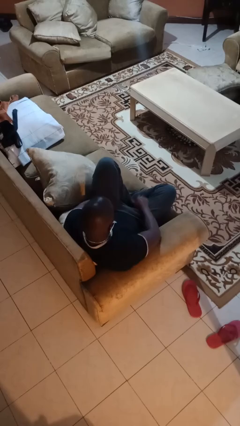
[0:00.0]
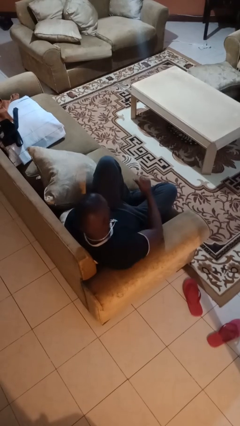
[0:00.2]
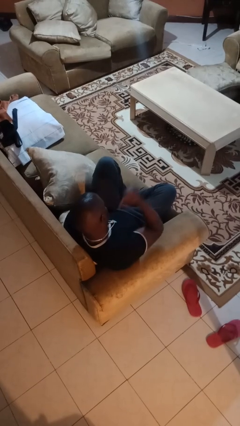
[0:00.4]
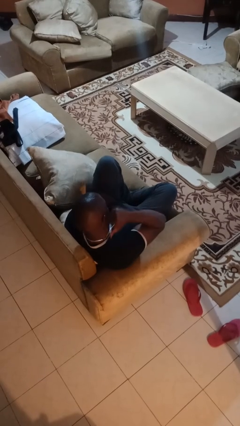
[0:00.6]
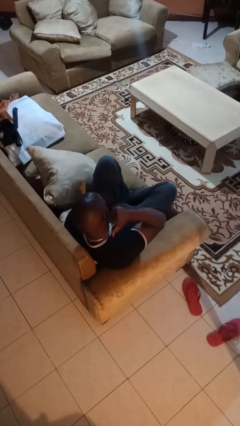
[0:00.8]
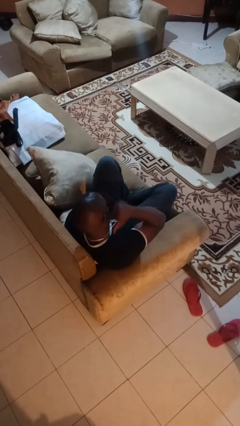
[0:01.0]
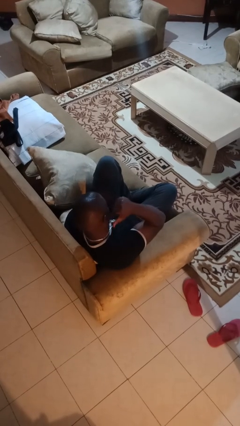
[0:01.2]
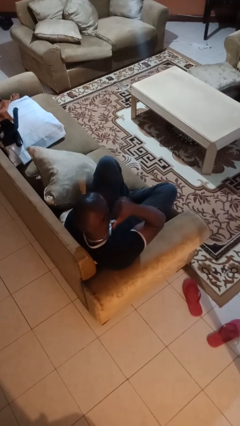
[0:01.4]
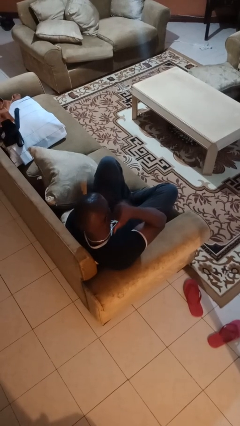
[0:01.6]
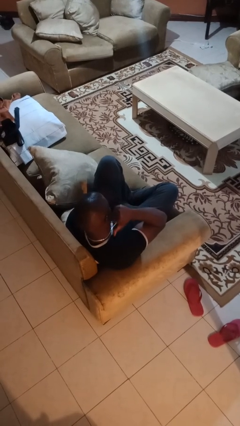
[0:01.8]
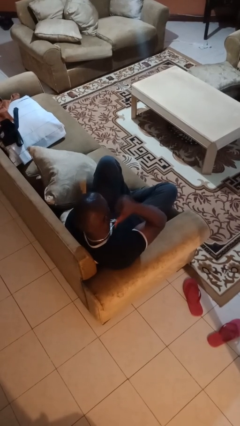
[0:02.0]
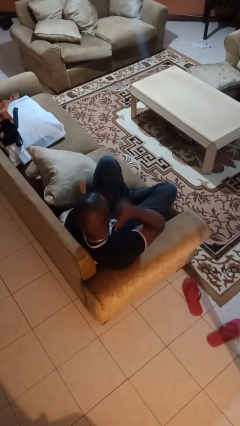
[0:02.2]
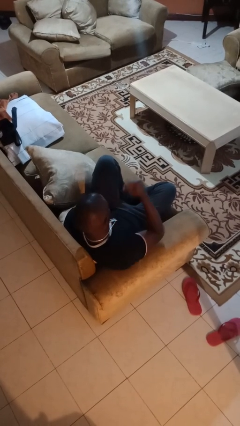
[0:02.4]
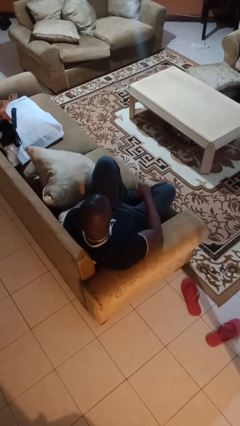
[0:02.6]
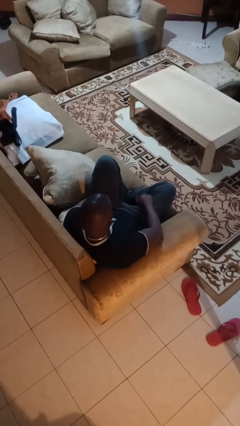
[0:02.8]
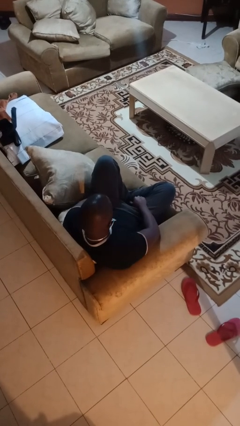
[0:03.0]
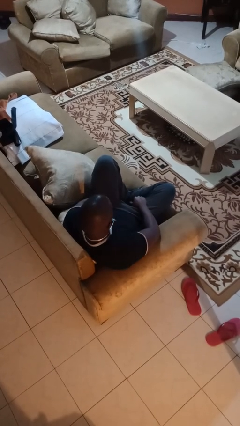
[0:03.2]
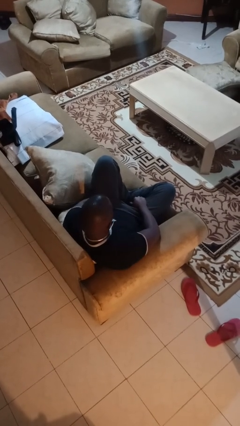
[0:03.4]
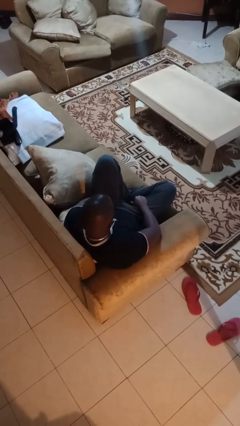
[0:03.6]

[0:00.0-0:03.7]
person gestures behind me

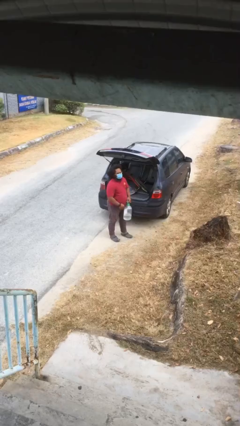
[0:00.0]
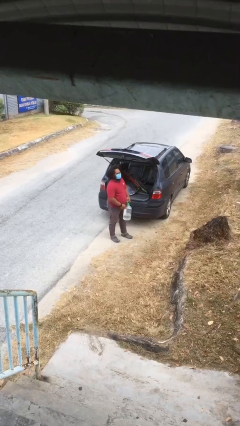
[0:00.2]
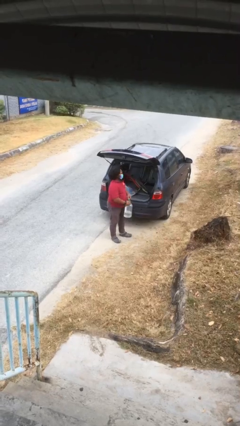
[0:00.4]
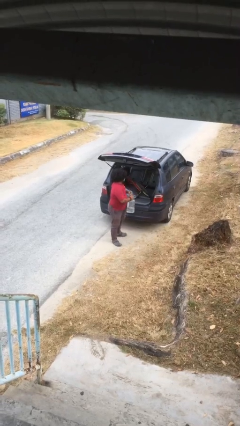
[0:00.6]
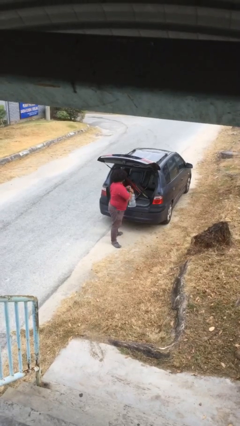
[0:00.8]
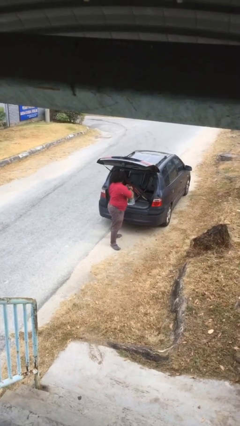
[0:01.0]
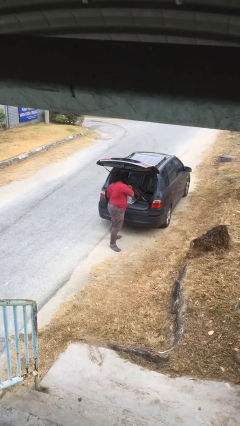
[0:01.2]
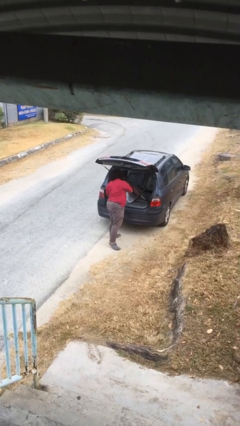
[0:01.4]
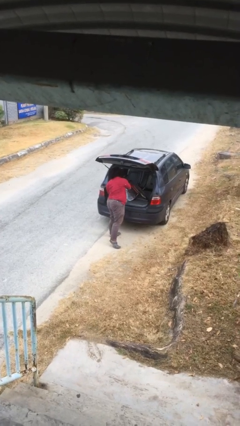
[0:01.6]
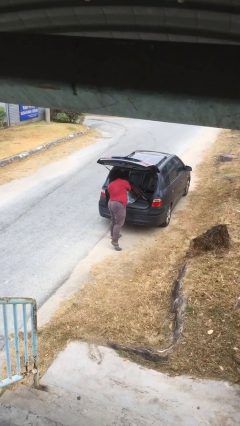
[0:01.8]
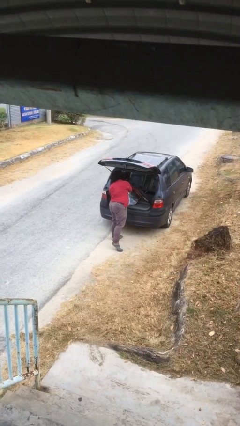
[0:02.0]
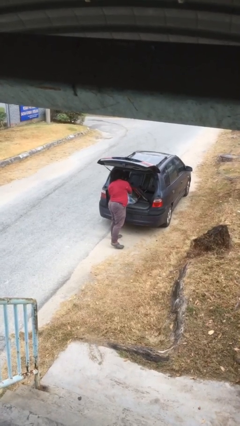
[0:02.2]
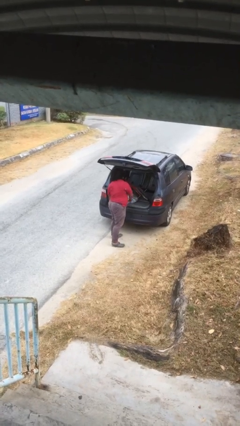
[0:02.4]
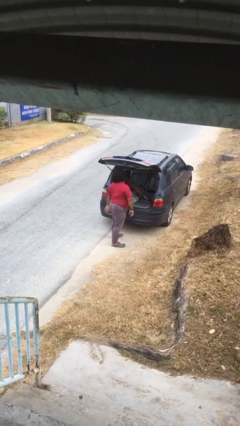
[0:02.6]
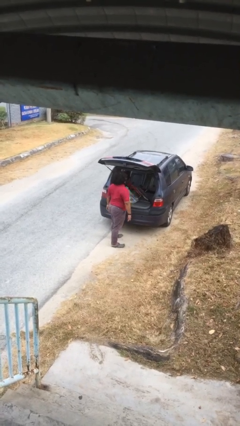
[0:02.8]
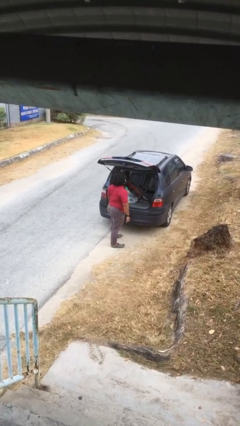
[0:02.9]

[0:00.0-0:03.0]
person loads car

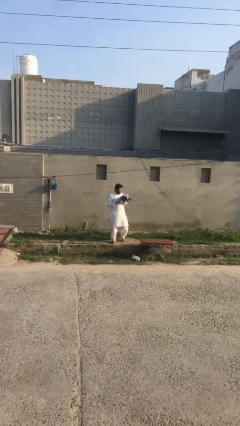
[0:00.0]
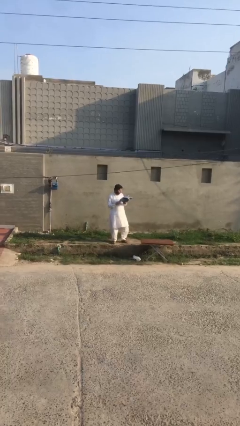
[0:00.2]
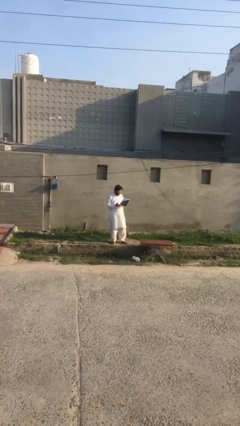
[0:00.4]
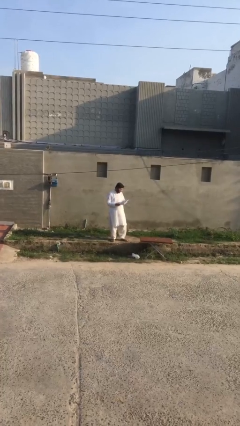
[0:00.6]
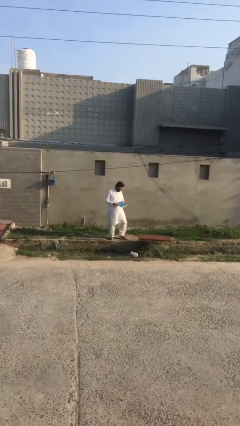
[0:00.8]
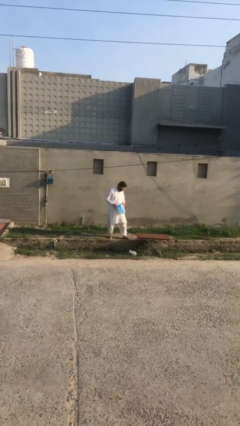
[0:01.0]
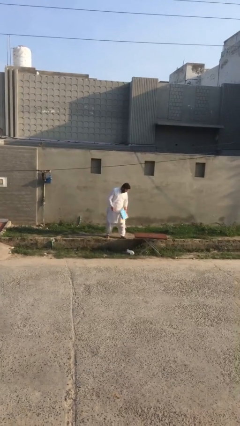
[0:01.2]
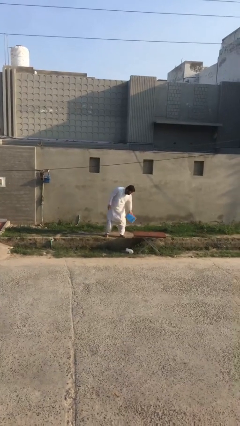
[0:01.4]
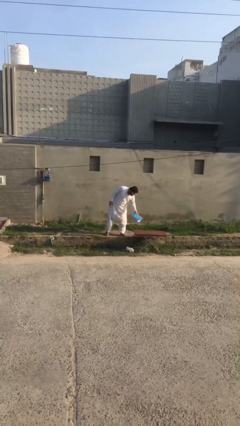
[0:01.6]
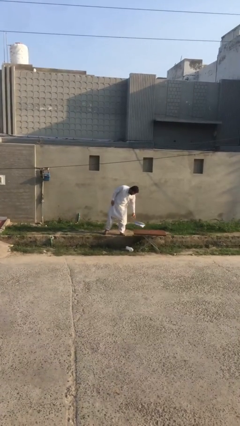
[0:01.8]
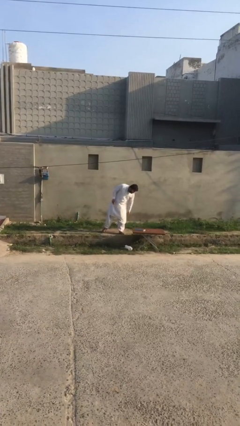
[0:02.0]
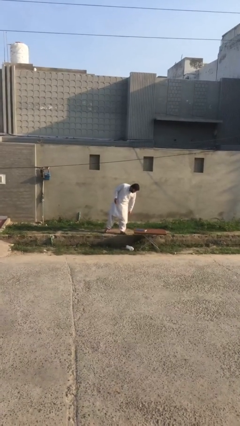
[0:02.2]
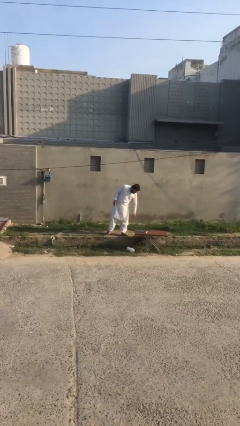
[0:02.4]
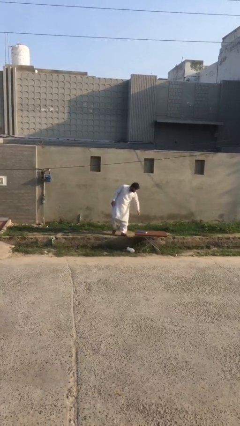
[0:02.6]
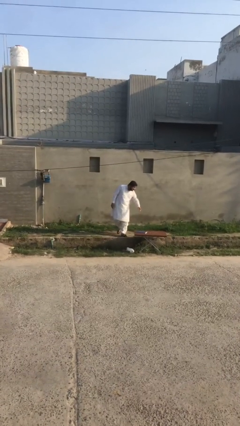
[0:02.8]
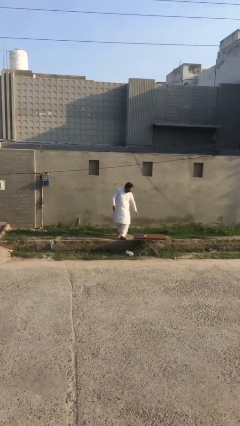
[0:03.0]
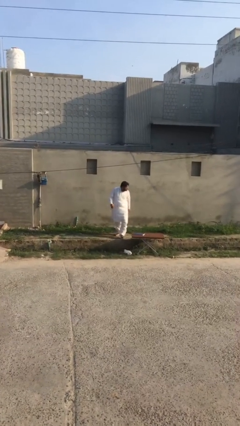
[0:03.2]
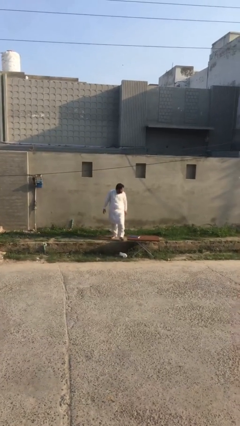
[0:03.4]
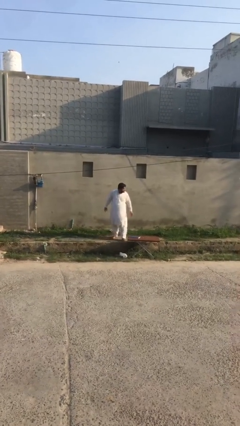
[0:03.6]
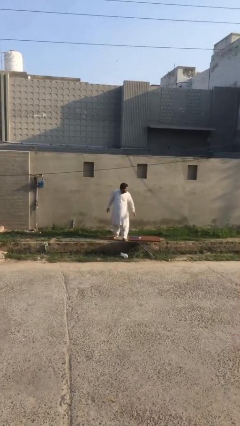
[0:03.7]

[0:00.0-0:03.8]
person puts down object on table

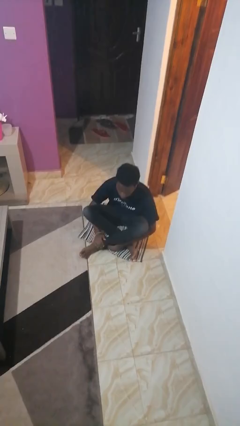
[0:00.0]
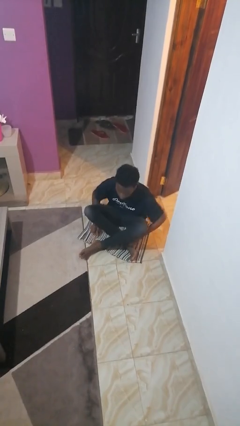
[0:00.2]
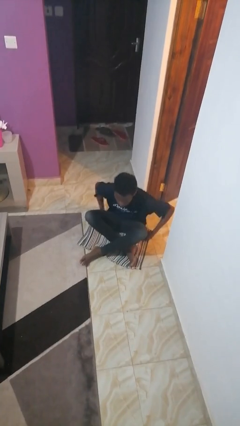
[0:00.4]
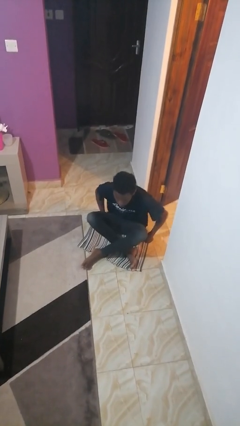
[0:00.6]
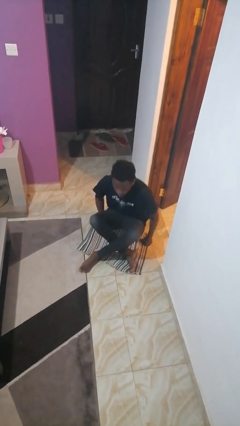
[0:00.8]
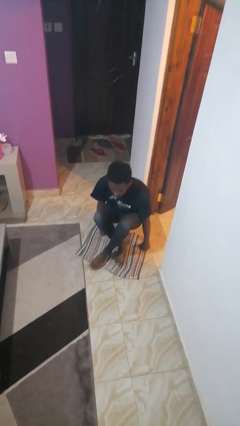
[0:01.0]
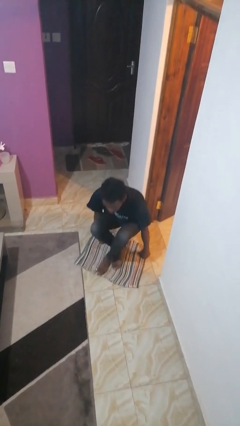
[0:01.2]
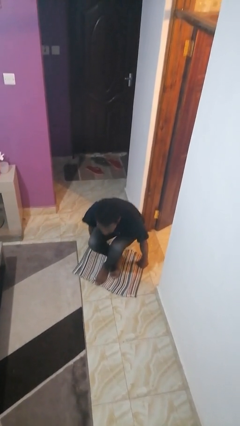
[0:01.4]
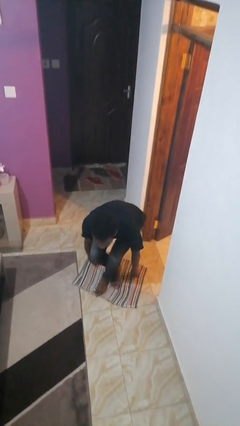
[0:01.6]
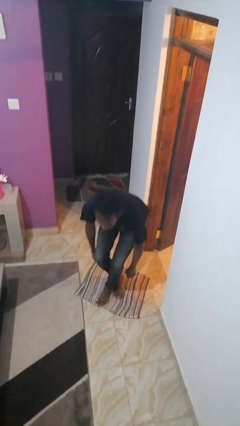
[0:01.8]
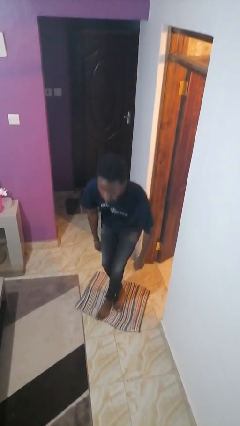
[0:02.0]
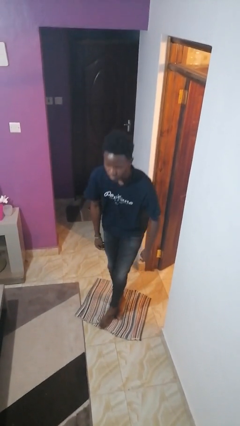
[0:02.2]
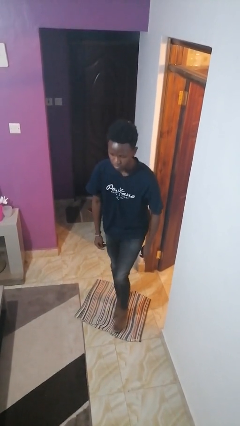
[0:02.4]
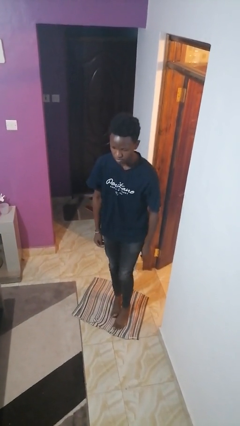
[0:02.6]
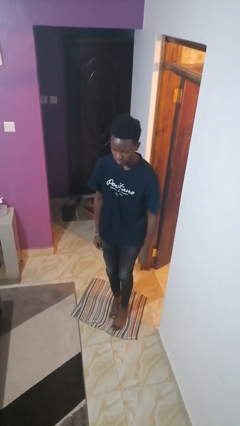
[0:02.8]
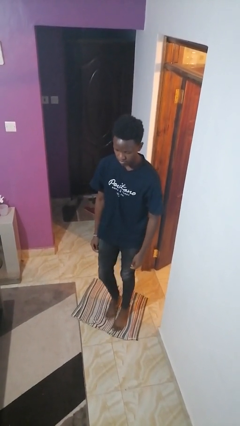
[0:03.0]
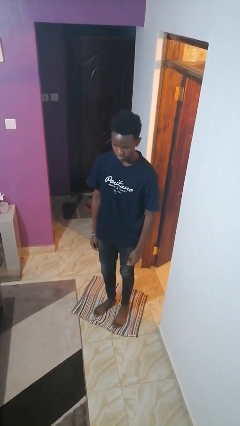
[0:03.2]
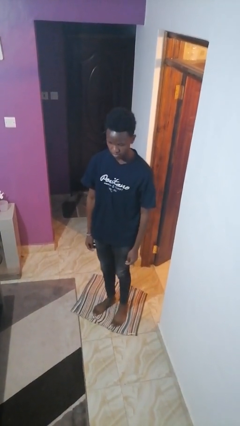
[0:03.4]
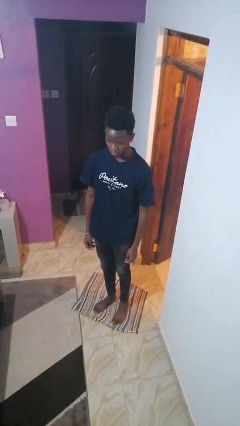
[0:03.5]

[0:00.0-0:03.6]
person stands up from floor

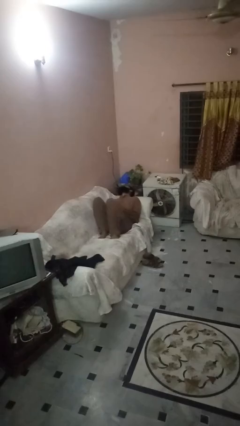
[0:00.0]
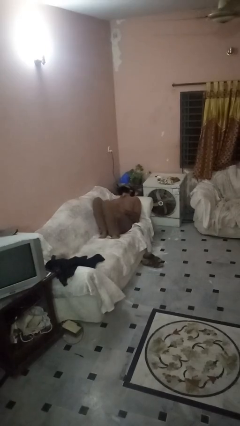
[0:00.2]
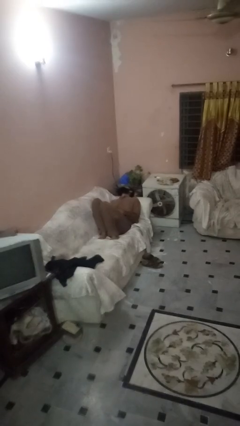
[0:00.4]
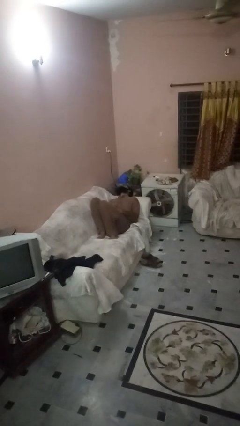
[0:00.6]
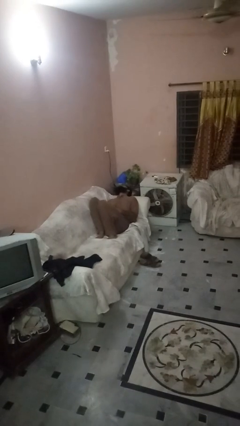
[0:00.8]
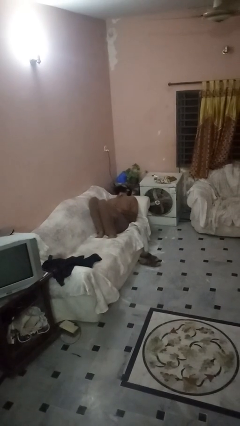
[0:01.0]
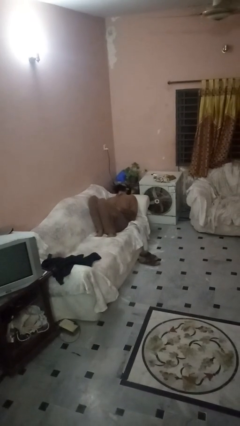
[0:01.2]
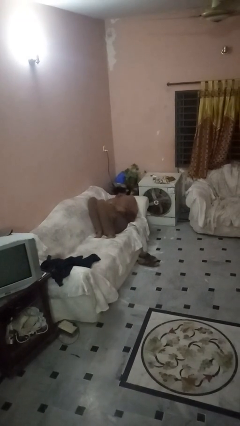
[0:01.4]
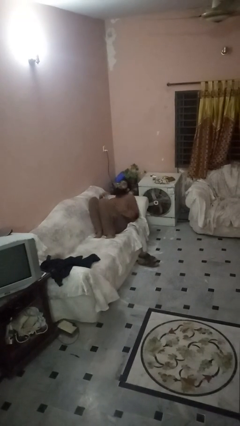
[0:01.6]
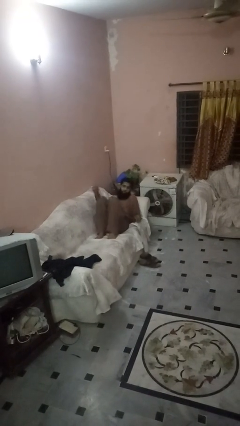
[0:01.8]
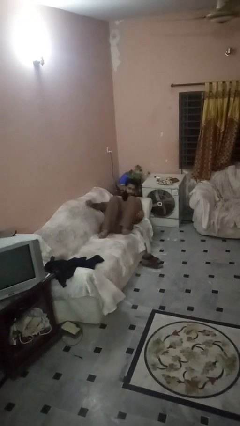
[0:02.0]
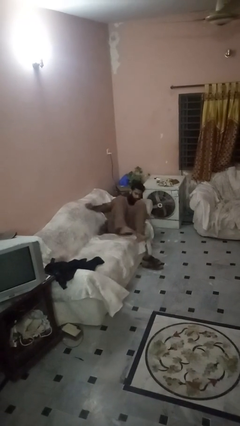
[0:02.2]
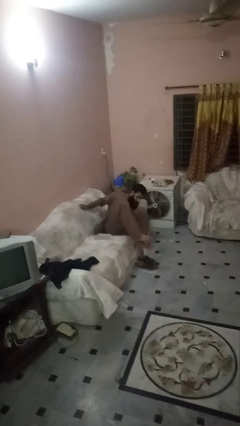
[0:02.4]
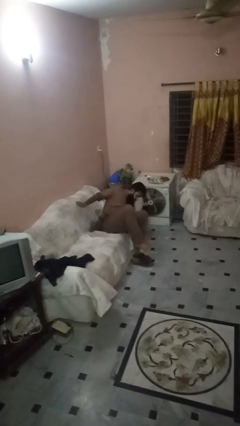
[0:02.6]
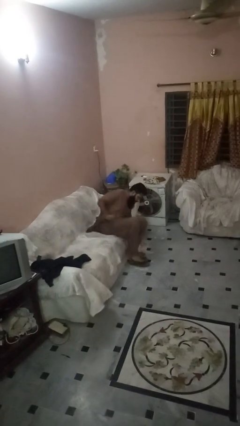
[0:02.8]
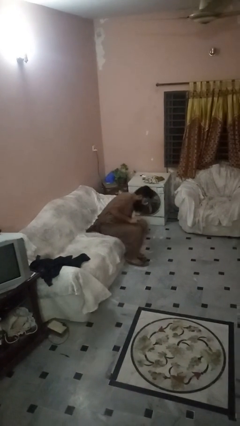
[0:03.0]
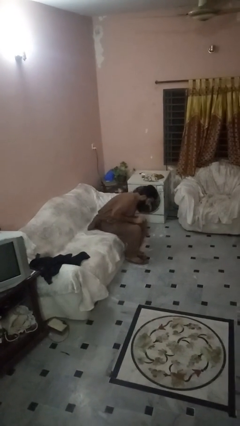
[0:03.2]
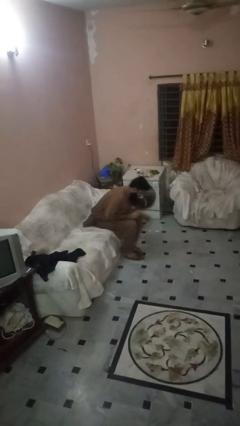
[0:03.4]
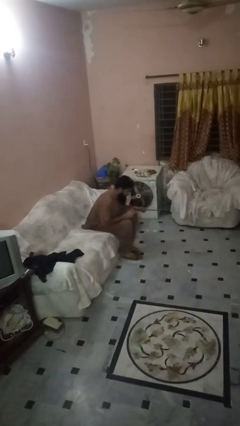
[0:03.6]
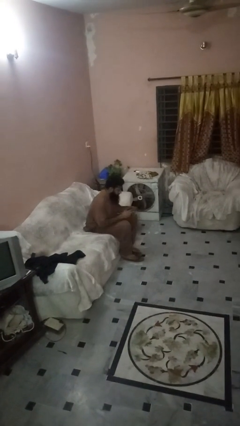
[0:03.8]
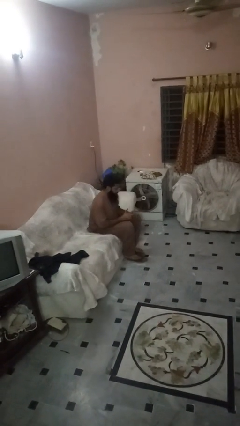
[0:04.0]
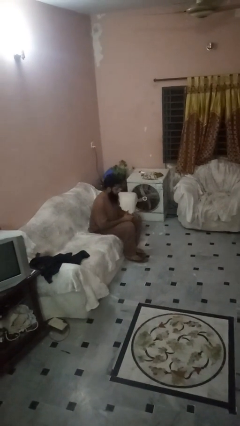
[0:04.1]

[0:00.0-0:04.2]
person stands up
